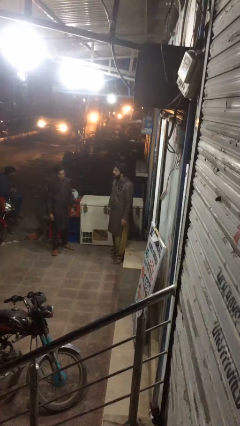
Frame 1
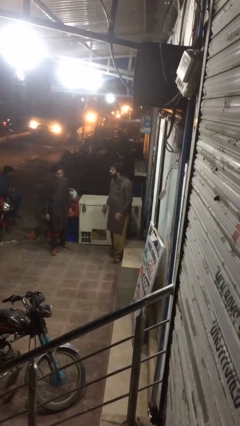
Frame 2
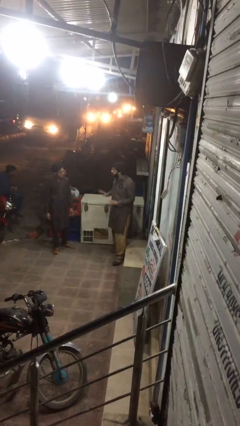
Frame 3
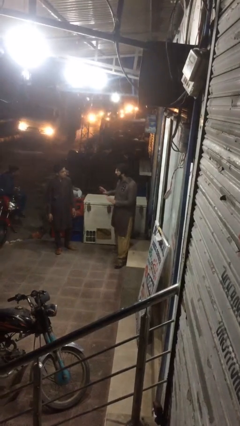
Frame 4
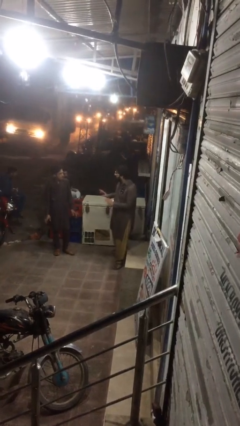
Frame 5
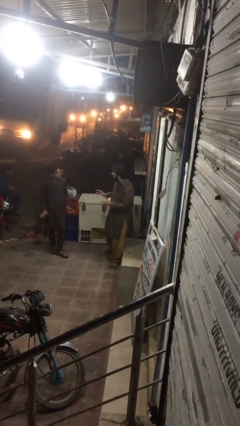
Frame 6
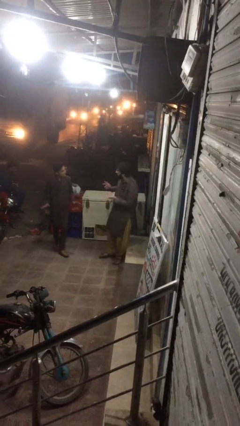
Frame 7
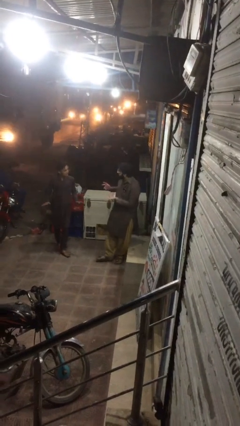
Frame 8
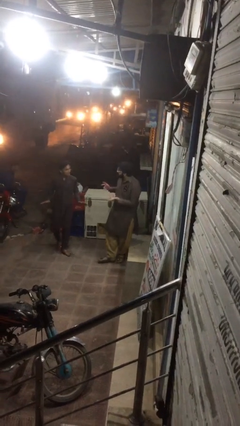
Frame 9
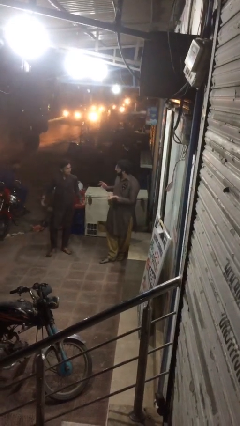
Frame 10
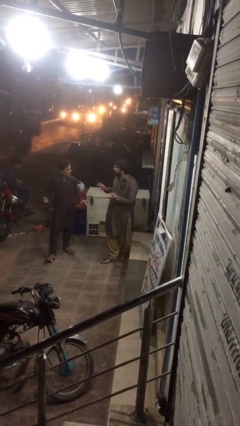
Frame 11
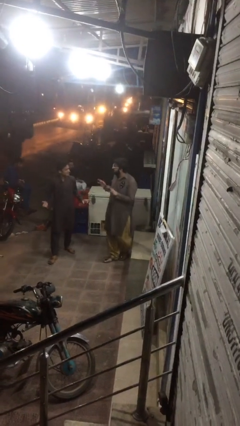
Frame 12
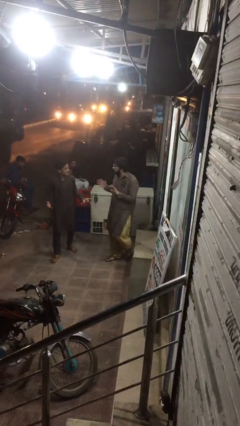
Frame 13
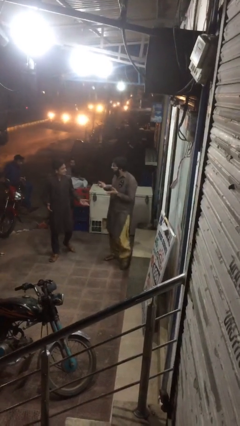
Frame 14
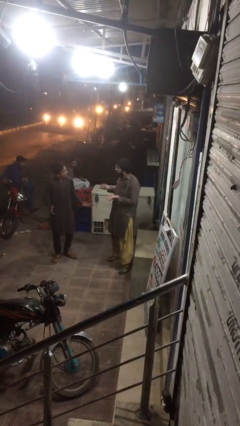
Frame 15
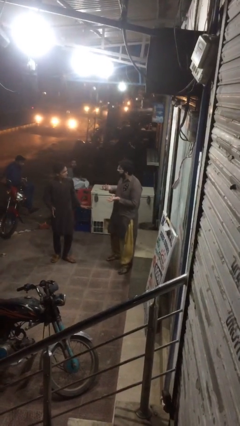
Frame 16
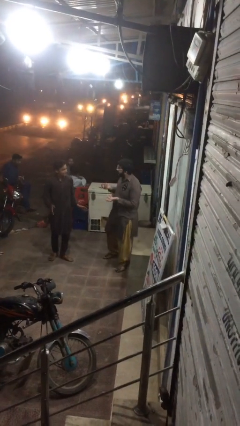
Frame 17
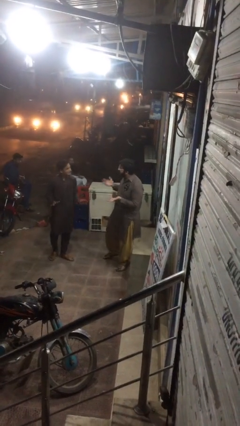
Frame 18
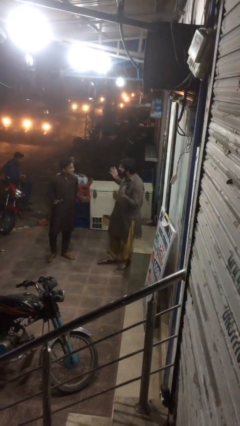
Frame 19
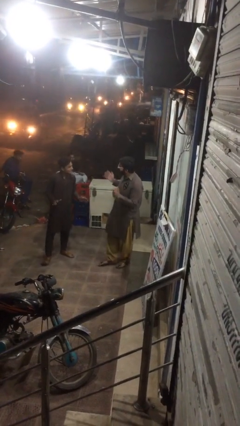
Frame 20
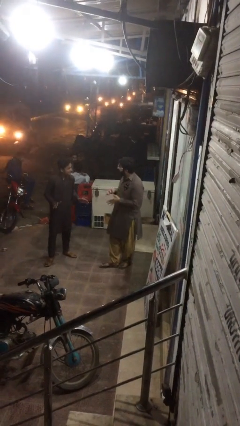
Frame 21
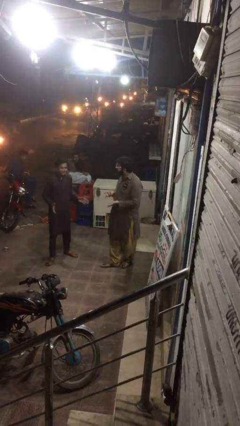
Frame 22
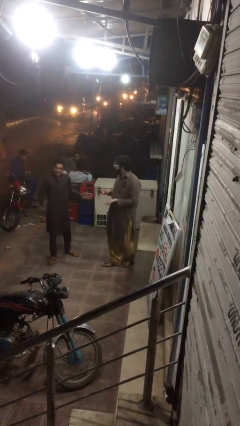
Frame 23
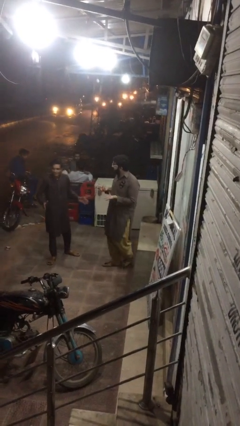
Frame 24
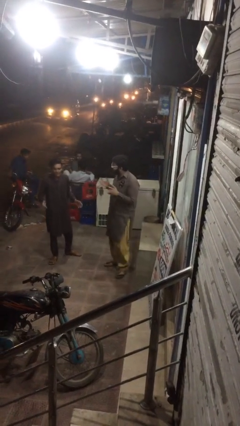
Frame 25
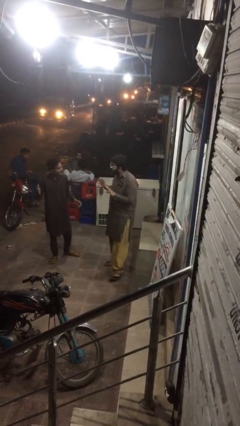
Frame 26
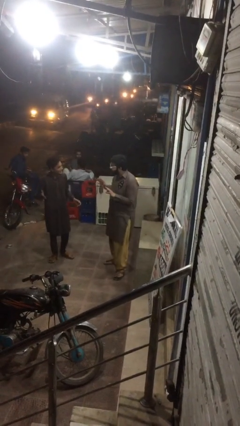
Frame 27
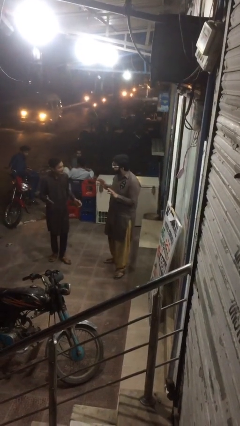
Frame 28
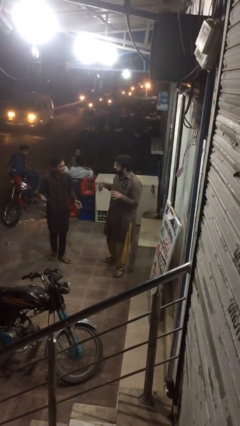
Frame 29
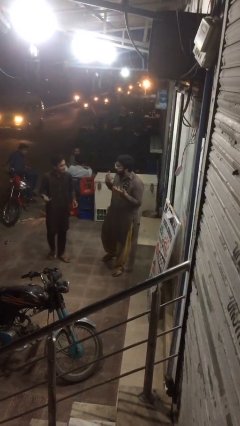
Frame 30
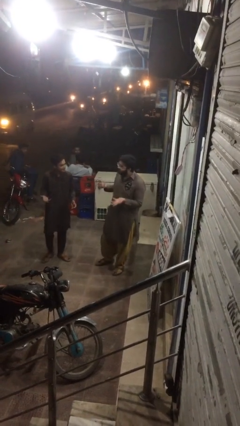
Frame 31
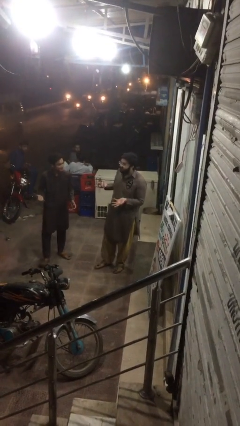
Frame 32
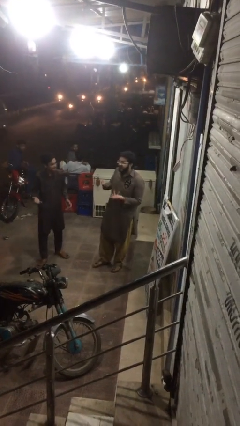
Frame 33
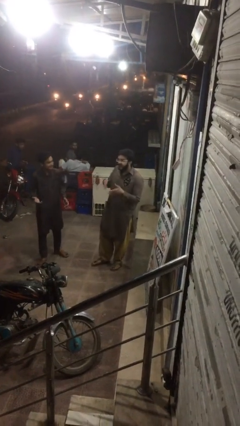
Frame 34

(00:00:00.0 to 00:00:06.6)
person talks to person

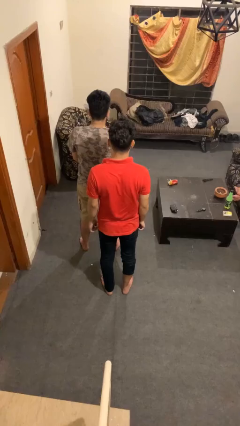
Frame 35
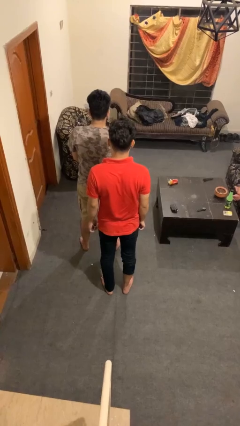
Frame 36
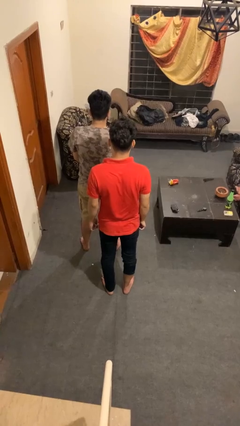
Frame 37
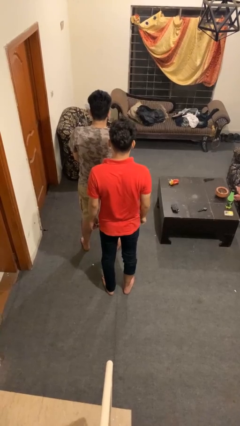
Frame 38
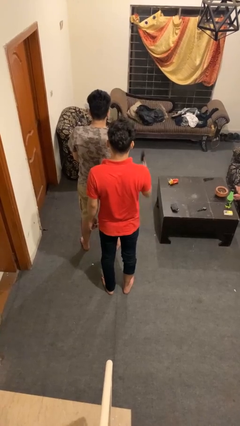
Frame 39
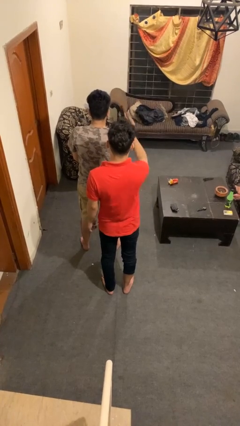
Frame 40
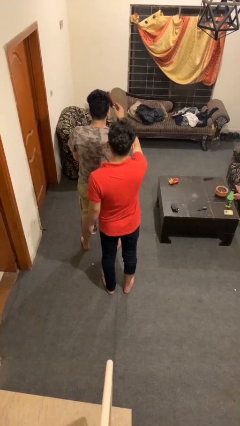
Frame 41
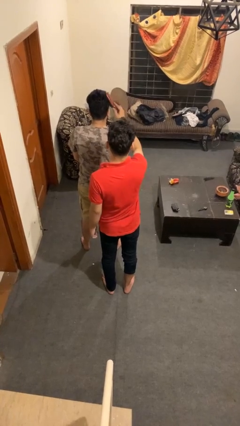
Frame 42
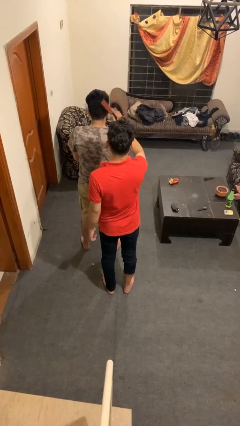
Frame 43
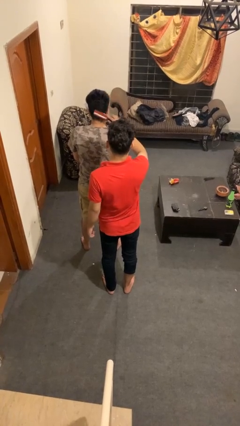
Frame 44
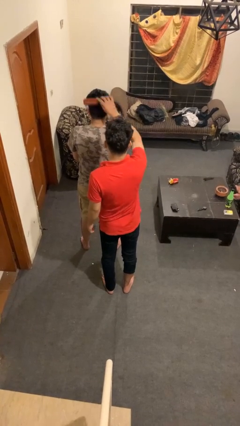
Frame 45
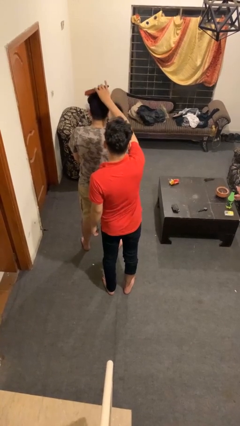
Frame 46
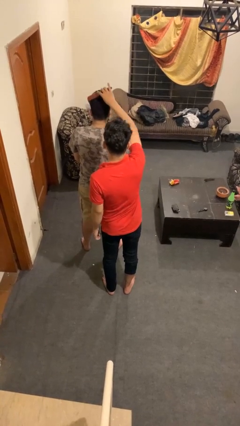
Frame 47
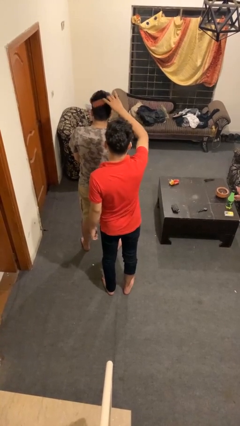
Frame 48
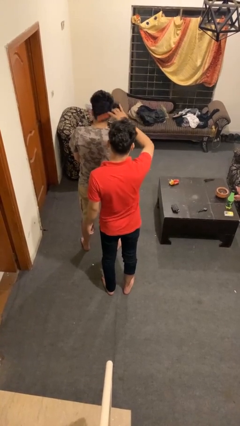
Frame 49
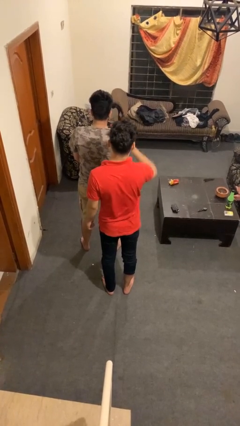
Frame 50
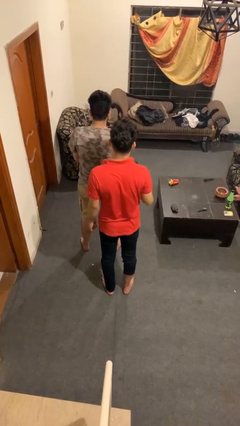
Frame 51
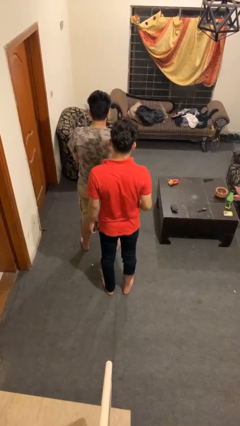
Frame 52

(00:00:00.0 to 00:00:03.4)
person brushes hair of person

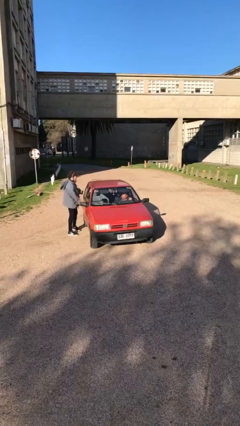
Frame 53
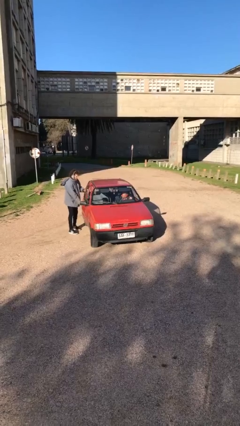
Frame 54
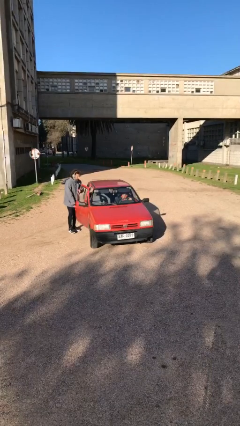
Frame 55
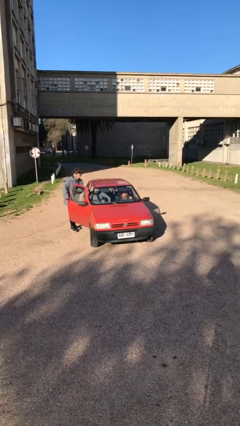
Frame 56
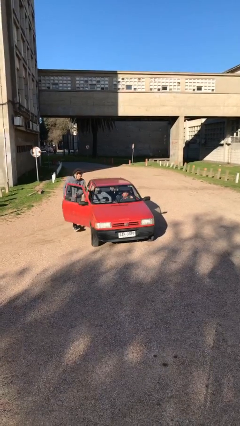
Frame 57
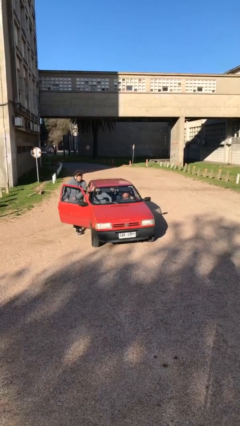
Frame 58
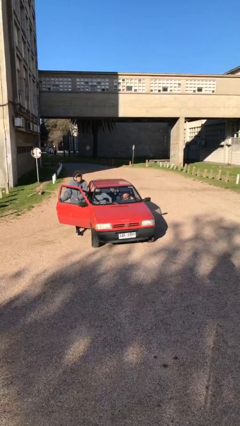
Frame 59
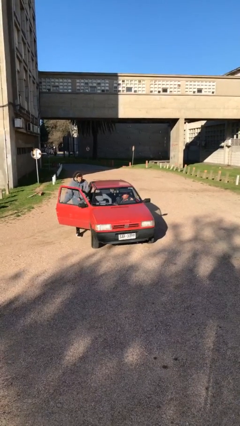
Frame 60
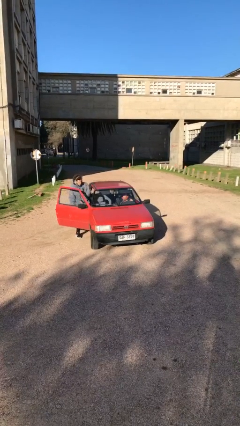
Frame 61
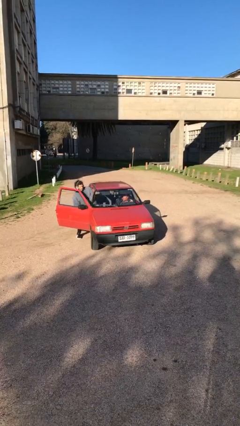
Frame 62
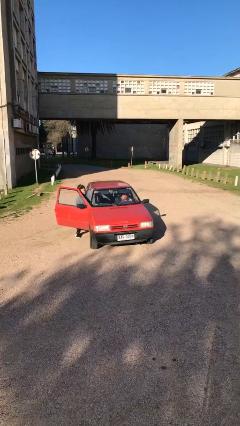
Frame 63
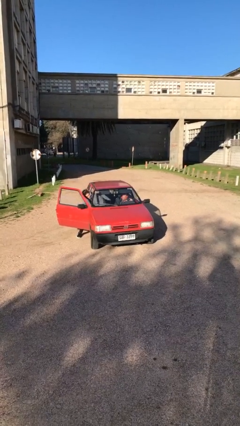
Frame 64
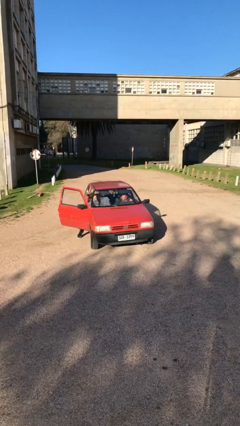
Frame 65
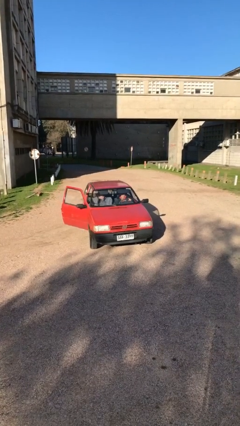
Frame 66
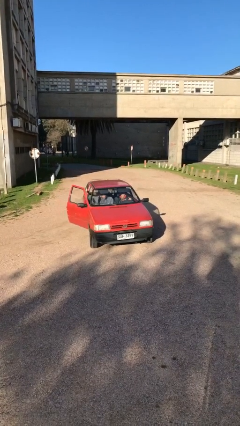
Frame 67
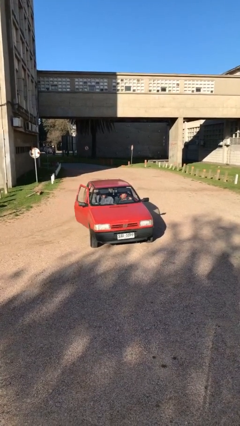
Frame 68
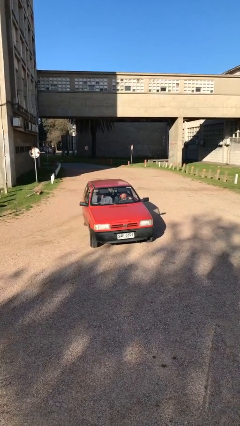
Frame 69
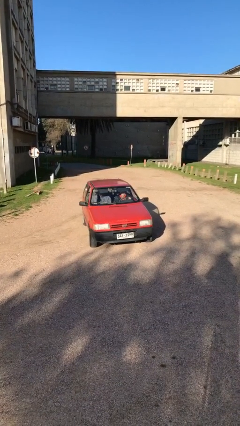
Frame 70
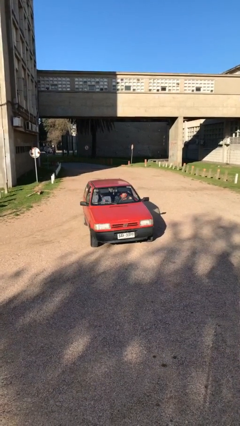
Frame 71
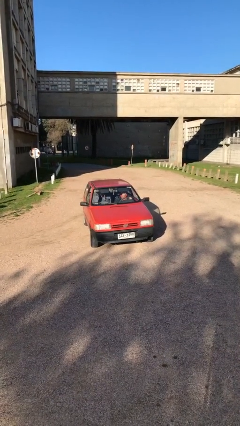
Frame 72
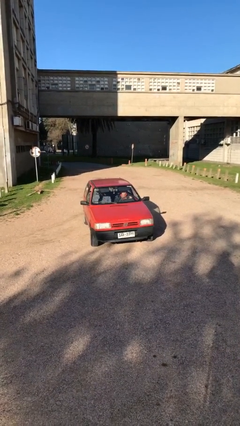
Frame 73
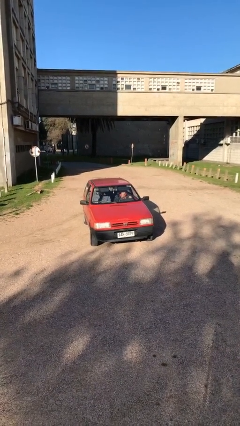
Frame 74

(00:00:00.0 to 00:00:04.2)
car picks up person

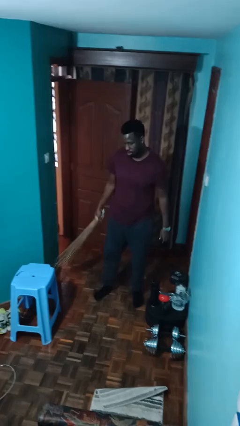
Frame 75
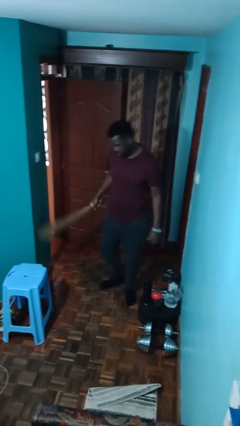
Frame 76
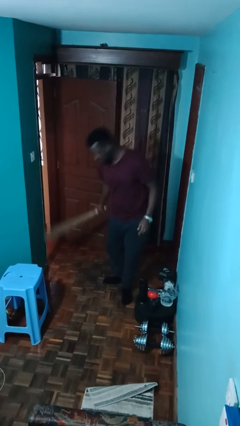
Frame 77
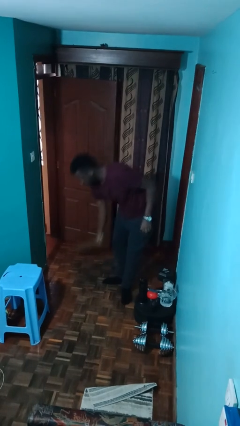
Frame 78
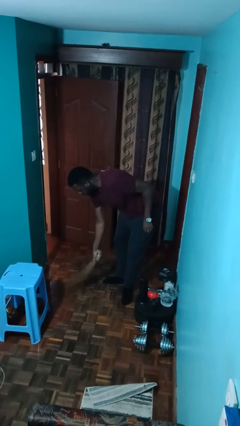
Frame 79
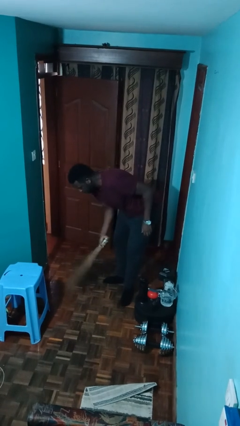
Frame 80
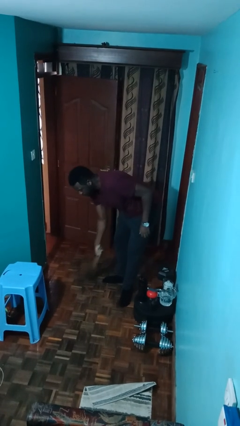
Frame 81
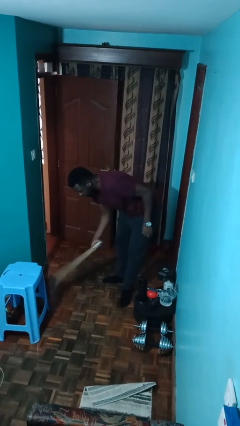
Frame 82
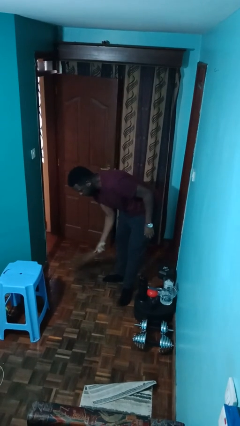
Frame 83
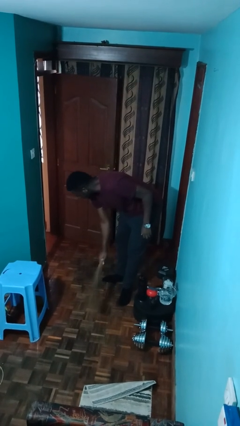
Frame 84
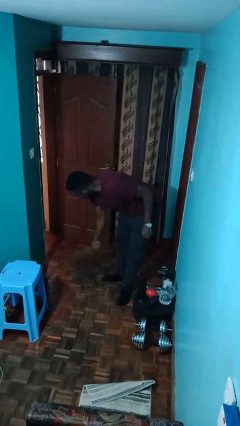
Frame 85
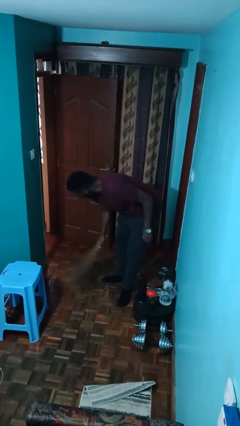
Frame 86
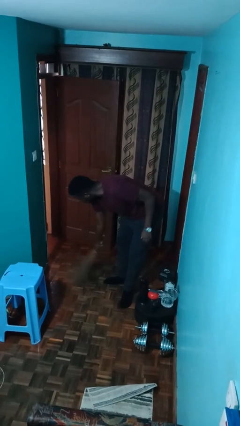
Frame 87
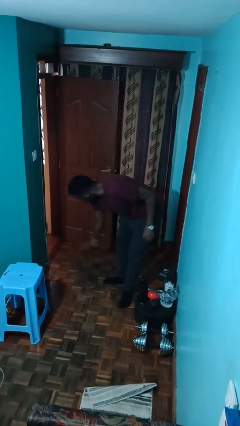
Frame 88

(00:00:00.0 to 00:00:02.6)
person sweeps floor

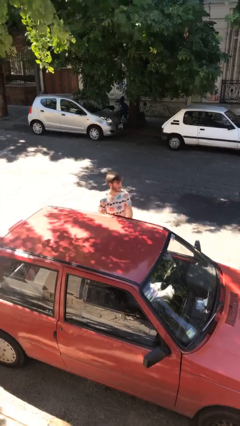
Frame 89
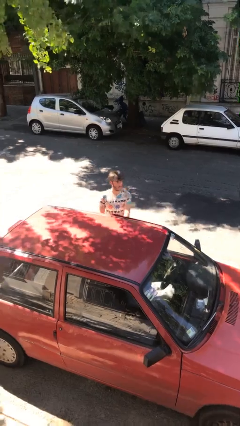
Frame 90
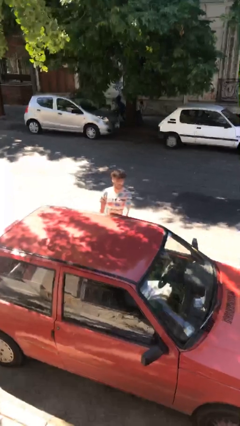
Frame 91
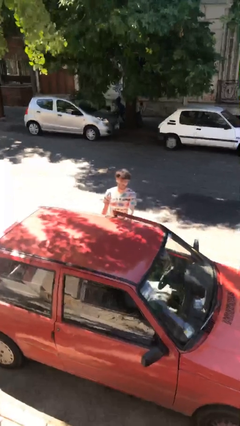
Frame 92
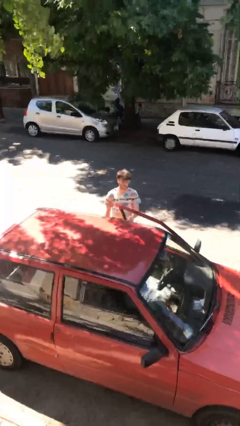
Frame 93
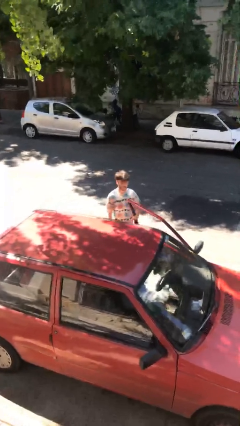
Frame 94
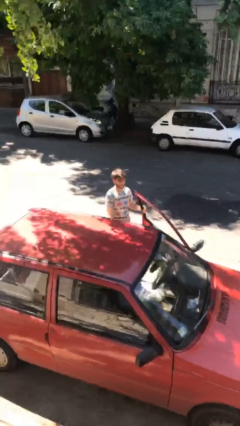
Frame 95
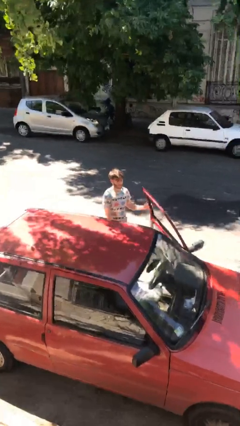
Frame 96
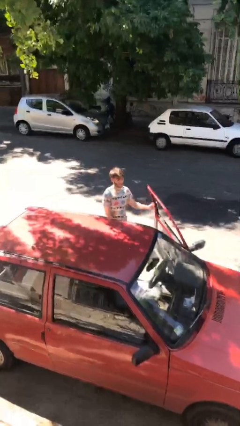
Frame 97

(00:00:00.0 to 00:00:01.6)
person opens car door
